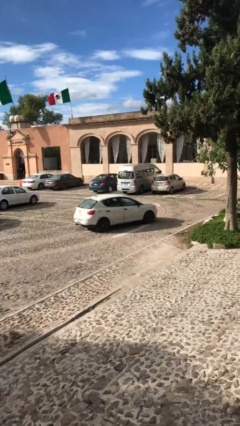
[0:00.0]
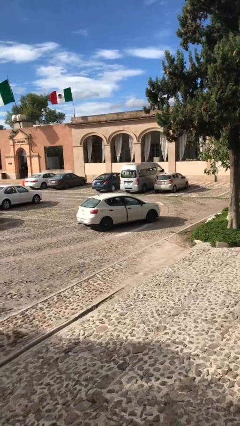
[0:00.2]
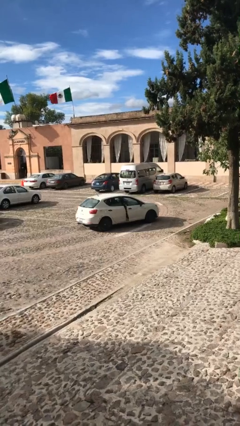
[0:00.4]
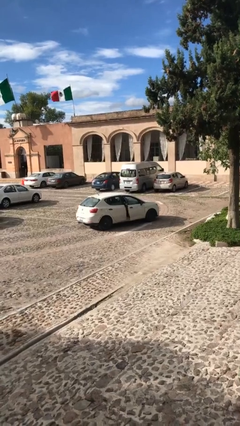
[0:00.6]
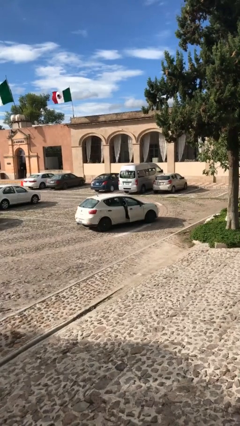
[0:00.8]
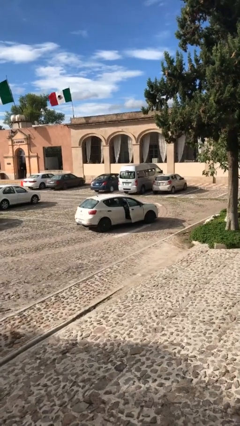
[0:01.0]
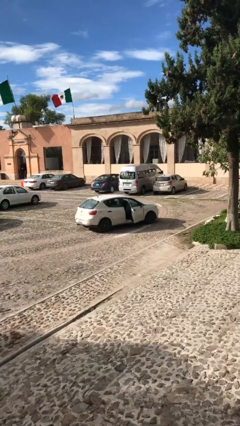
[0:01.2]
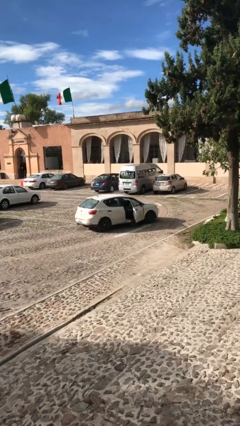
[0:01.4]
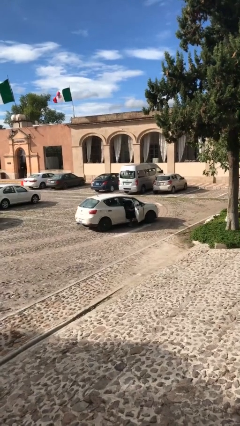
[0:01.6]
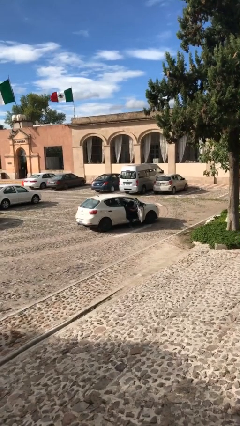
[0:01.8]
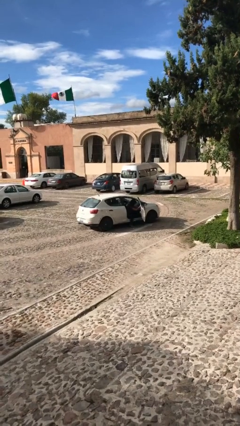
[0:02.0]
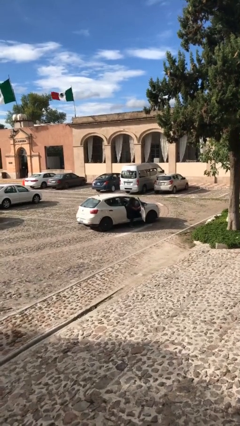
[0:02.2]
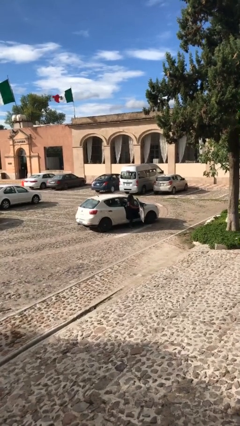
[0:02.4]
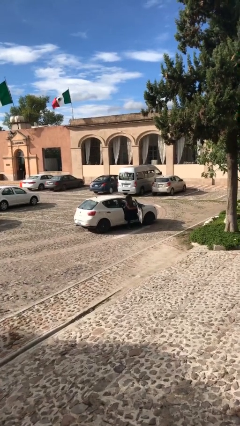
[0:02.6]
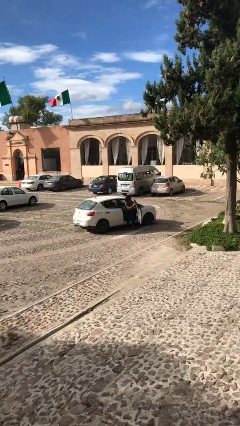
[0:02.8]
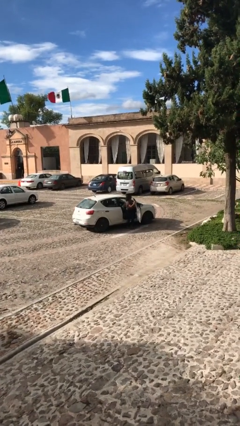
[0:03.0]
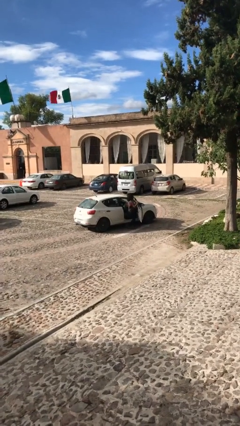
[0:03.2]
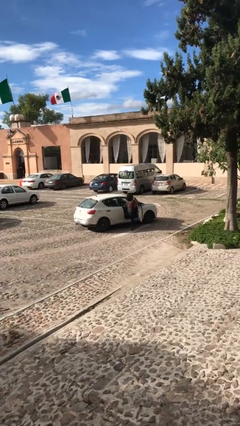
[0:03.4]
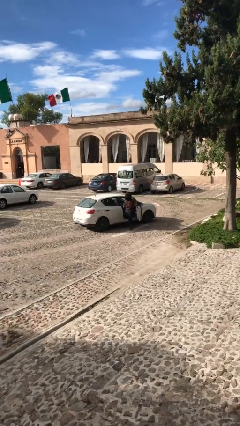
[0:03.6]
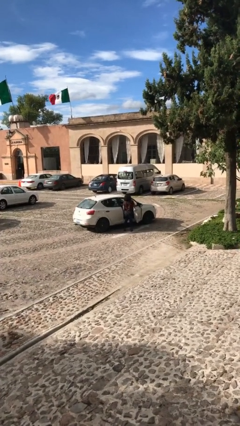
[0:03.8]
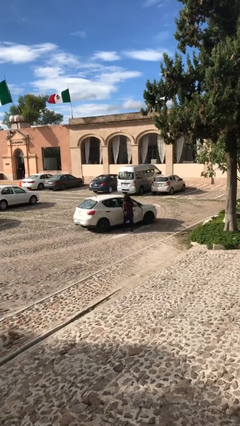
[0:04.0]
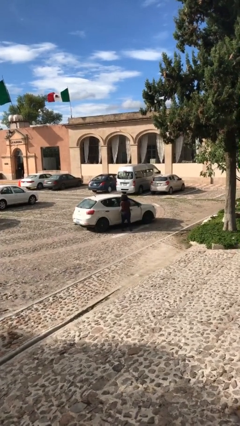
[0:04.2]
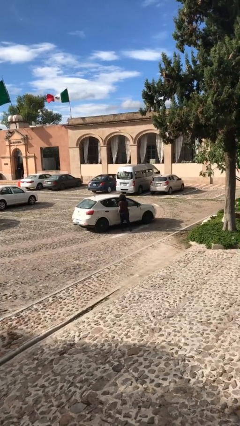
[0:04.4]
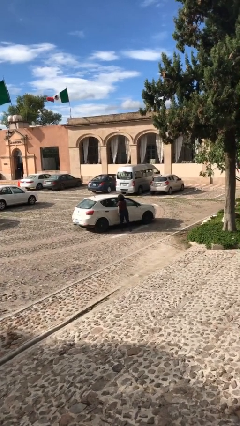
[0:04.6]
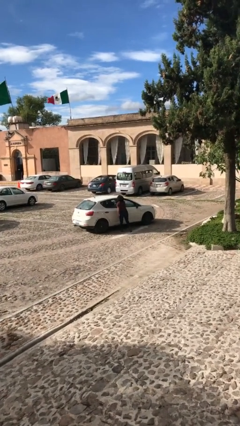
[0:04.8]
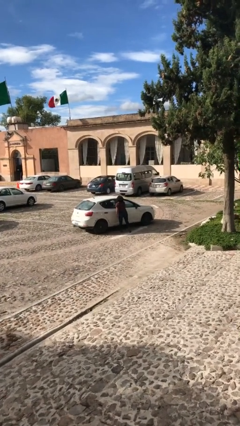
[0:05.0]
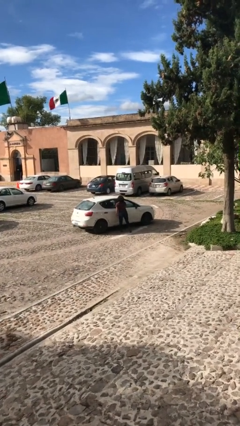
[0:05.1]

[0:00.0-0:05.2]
car drops off person

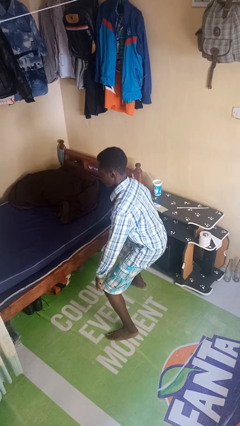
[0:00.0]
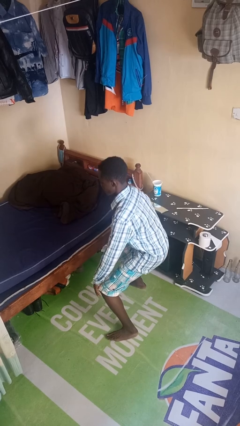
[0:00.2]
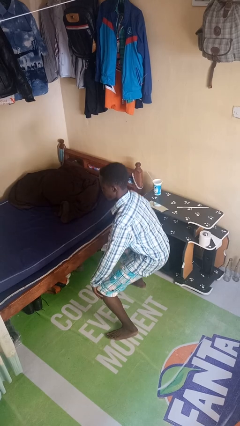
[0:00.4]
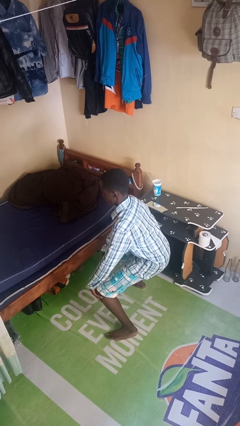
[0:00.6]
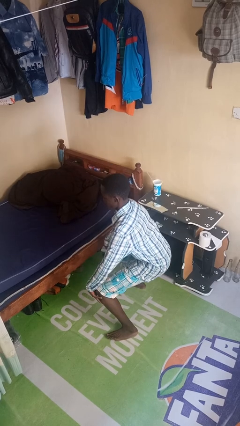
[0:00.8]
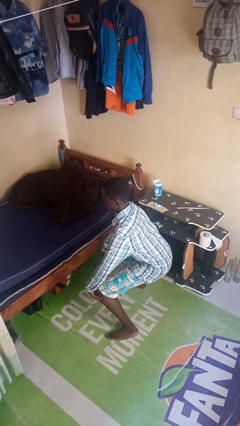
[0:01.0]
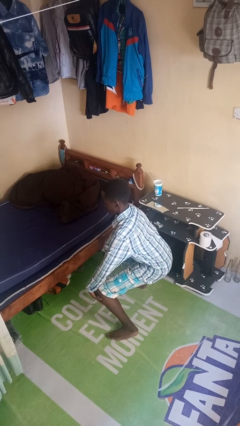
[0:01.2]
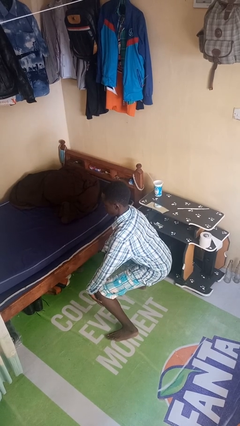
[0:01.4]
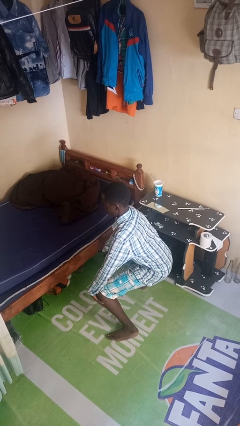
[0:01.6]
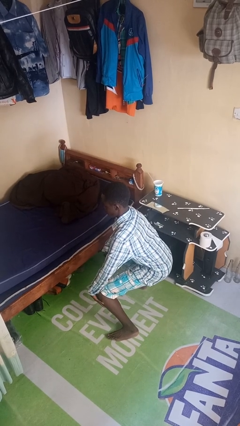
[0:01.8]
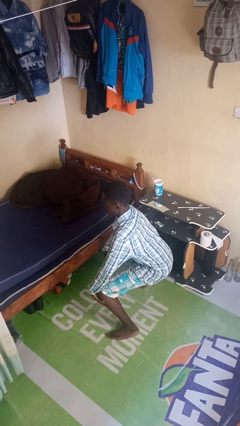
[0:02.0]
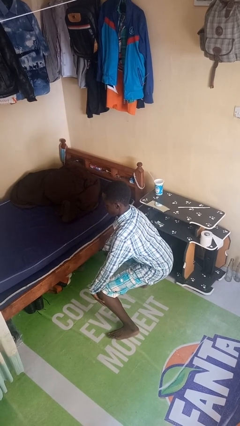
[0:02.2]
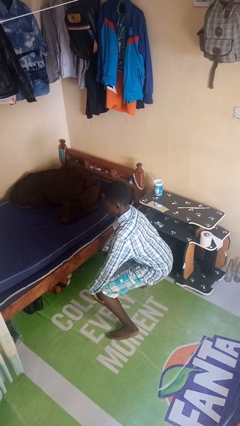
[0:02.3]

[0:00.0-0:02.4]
person squats

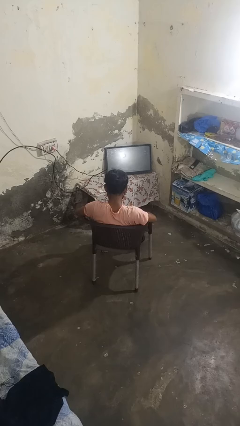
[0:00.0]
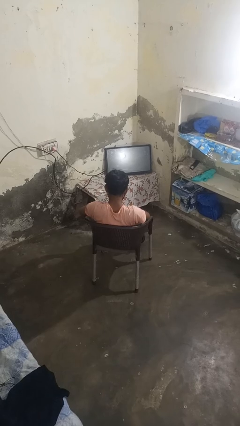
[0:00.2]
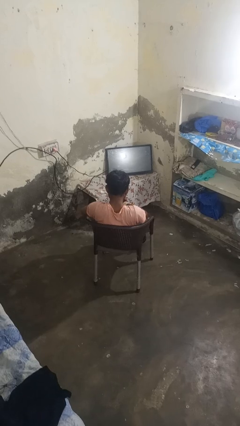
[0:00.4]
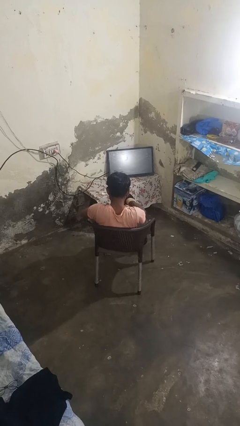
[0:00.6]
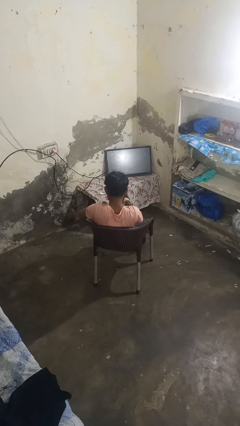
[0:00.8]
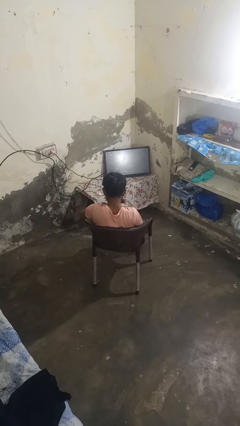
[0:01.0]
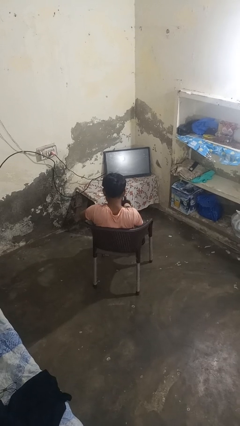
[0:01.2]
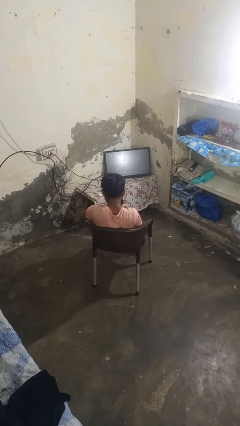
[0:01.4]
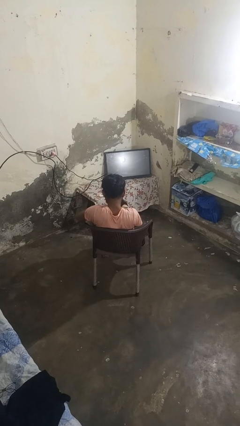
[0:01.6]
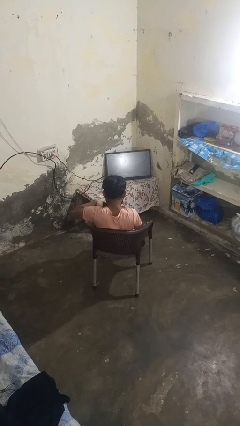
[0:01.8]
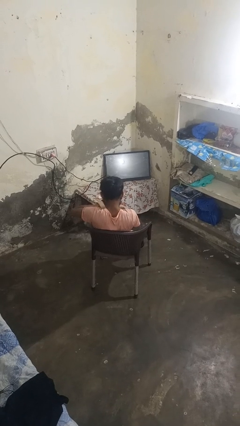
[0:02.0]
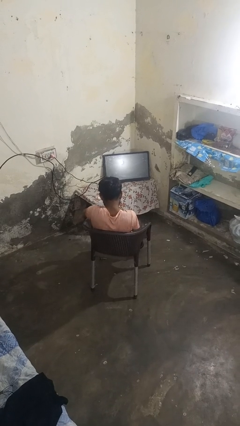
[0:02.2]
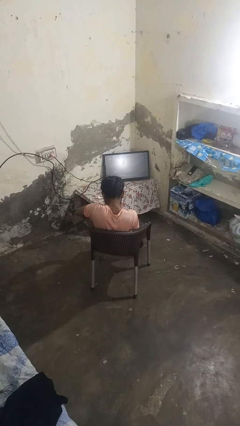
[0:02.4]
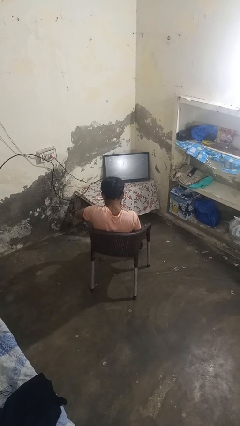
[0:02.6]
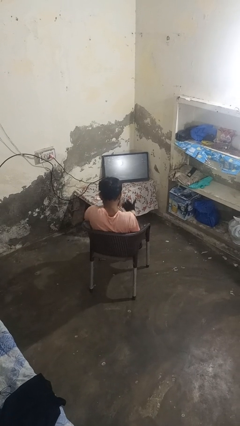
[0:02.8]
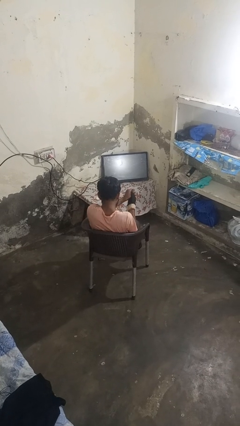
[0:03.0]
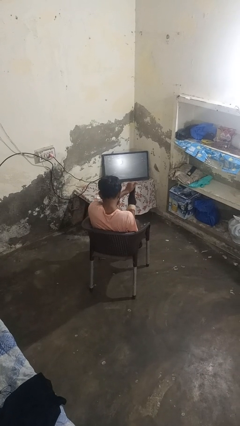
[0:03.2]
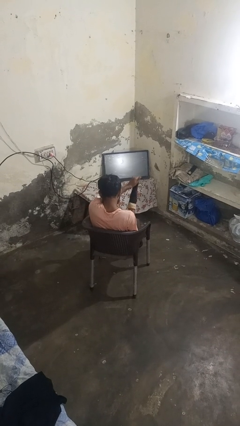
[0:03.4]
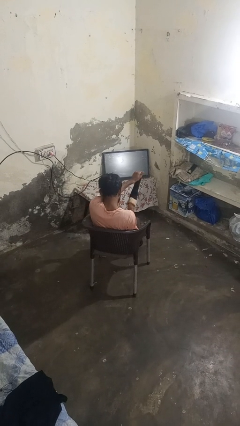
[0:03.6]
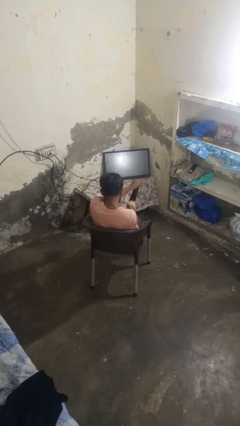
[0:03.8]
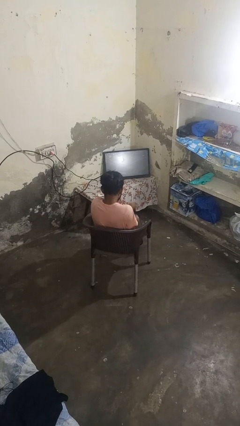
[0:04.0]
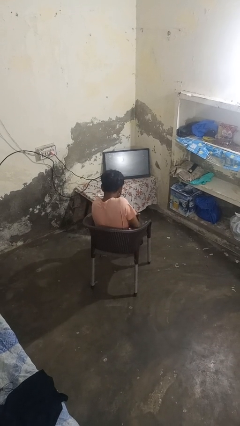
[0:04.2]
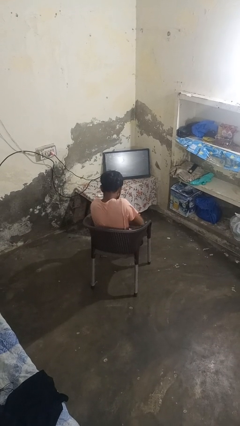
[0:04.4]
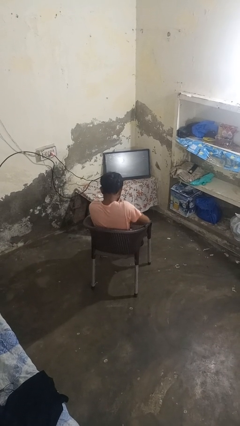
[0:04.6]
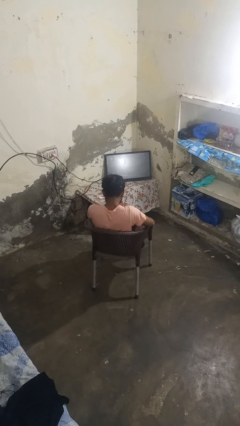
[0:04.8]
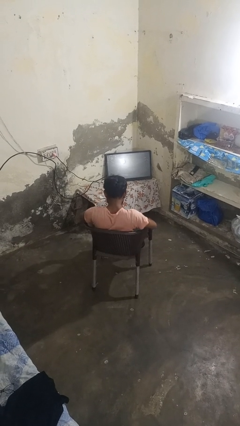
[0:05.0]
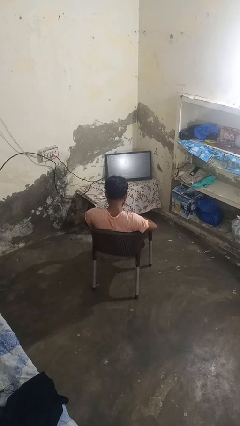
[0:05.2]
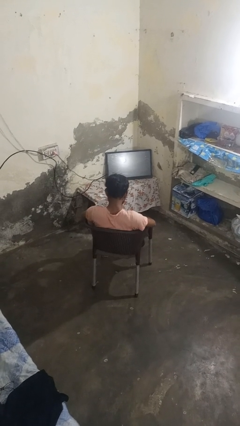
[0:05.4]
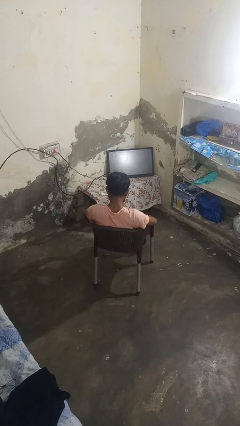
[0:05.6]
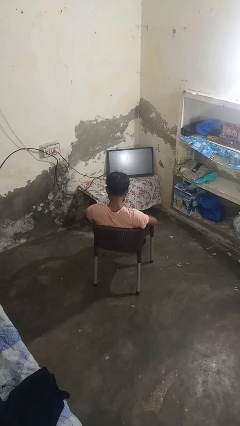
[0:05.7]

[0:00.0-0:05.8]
person takes off gloves

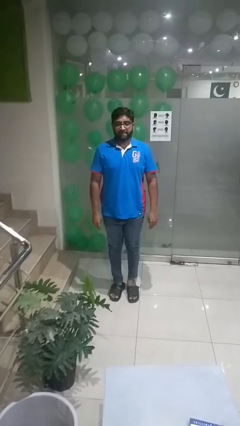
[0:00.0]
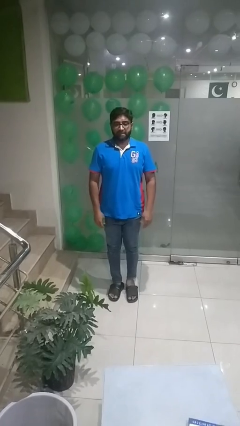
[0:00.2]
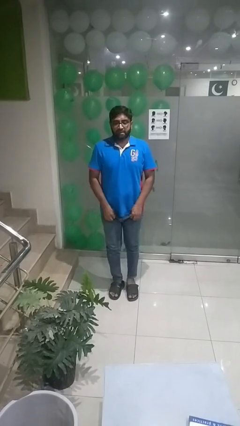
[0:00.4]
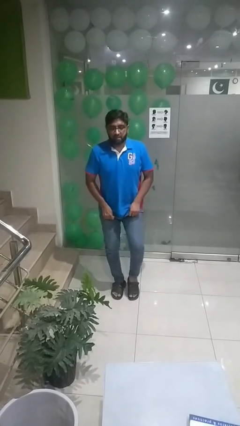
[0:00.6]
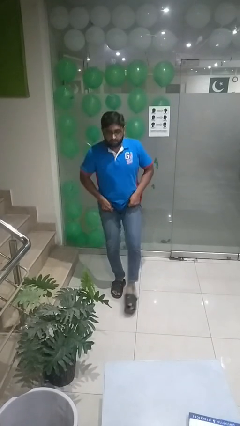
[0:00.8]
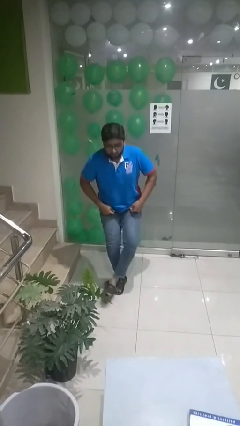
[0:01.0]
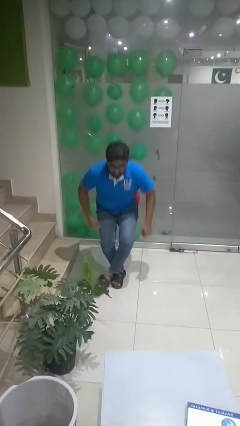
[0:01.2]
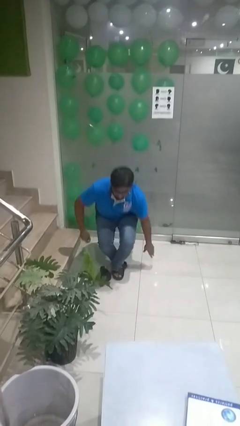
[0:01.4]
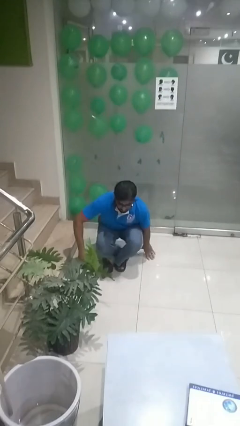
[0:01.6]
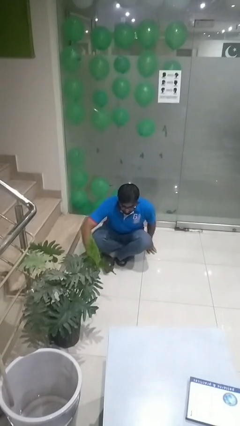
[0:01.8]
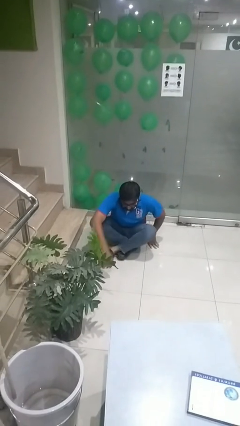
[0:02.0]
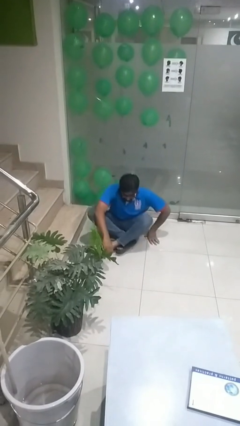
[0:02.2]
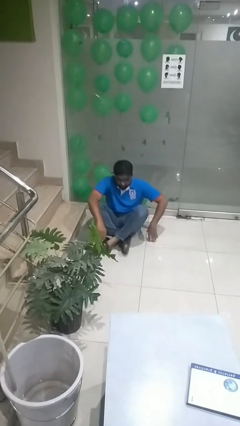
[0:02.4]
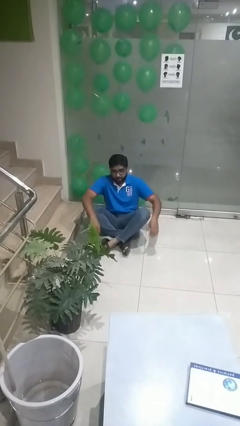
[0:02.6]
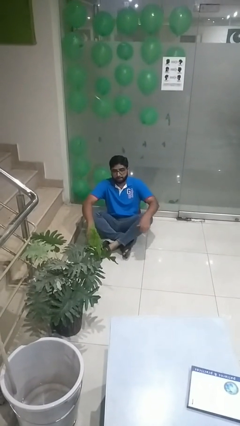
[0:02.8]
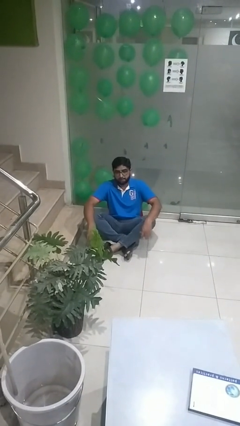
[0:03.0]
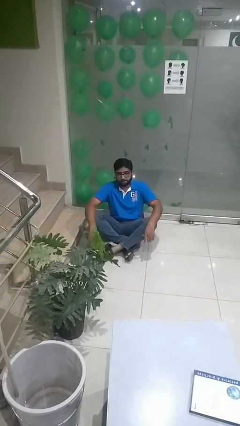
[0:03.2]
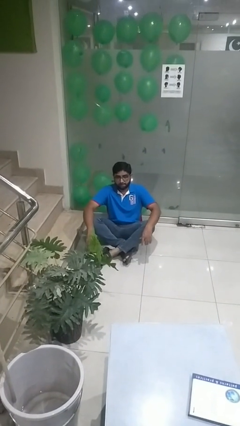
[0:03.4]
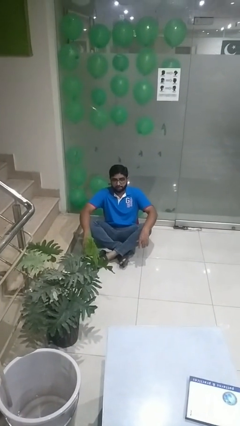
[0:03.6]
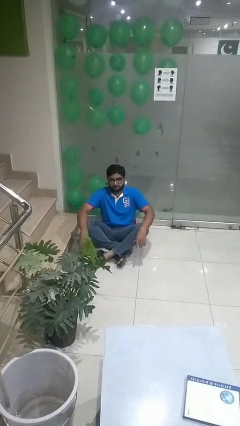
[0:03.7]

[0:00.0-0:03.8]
person sits crisscross

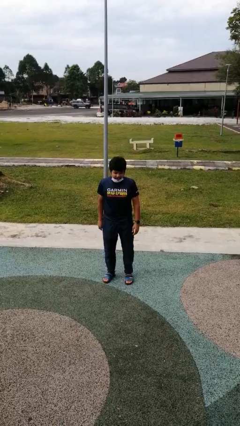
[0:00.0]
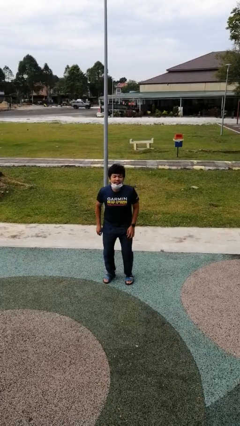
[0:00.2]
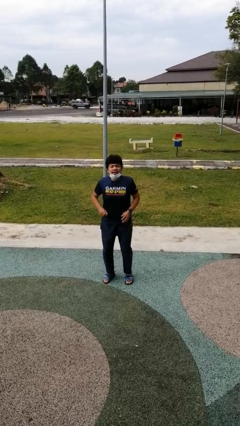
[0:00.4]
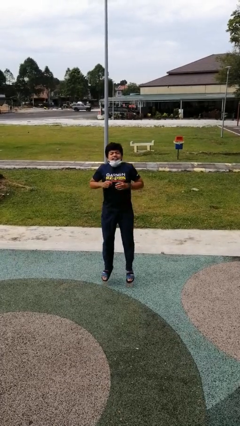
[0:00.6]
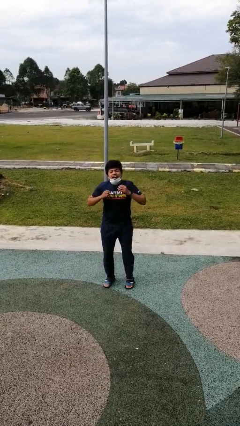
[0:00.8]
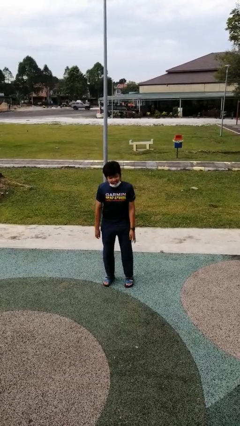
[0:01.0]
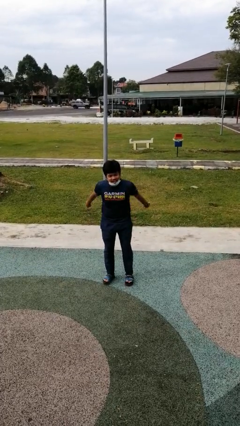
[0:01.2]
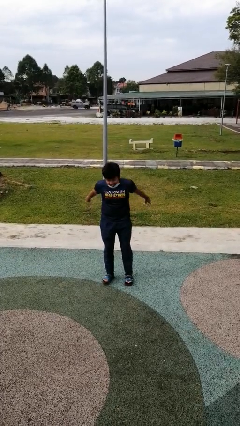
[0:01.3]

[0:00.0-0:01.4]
person jumps
